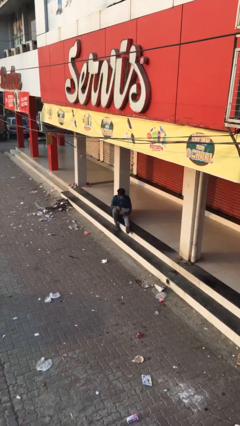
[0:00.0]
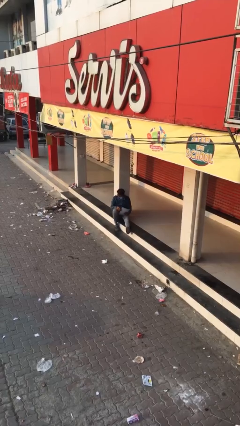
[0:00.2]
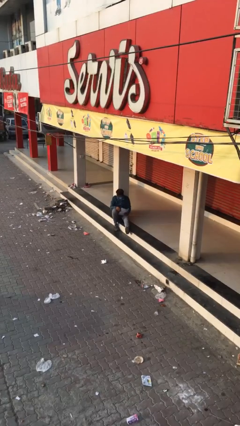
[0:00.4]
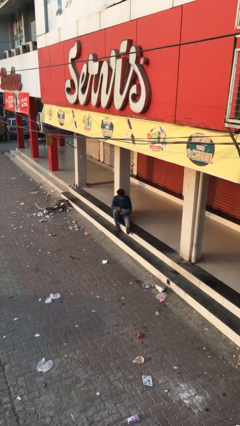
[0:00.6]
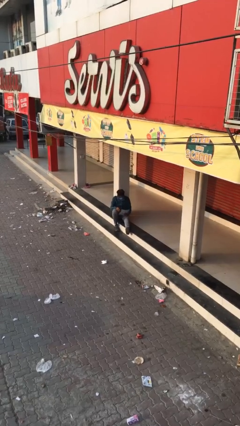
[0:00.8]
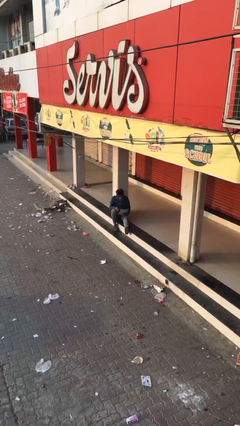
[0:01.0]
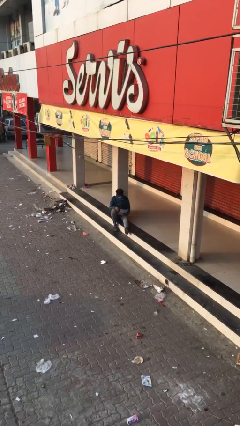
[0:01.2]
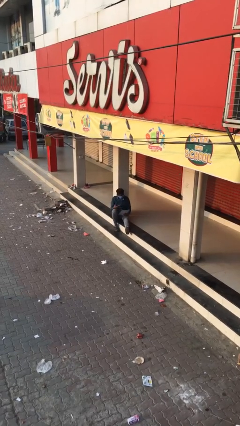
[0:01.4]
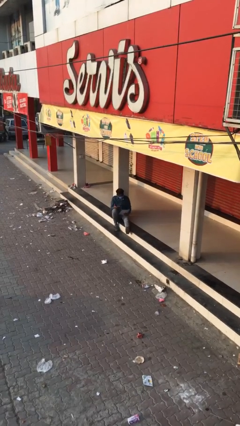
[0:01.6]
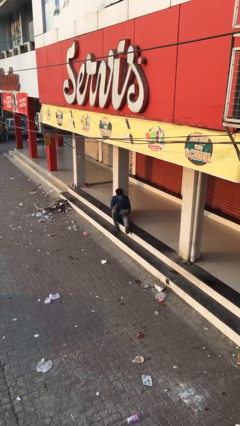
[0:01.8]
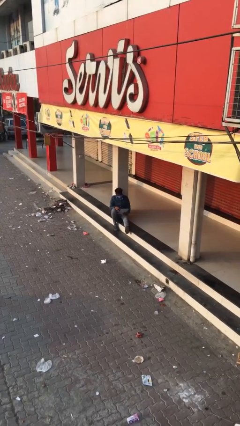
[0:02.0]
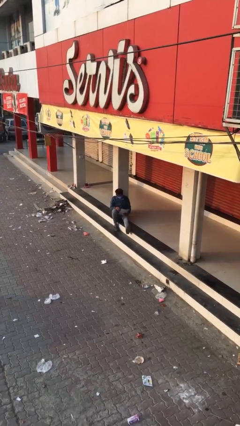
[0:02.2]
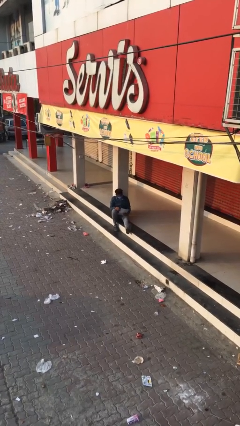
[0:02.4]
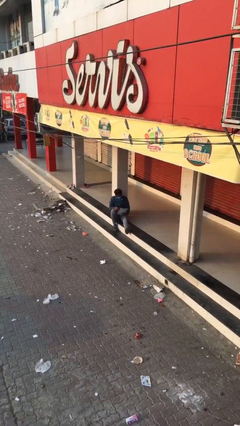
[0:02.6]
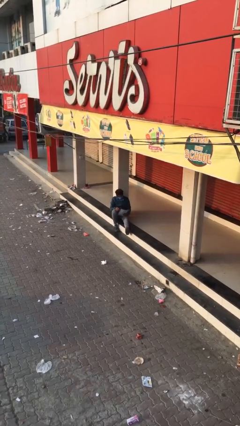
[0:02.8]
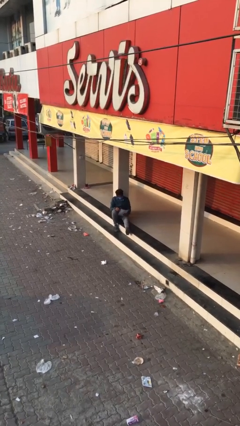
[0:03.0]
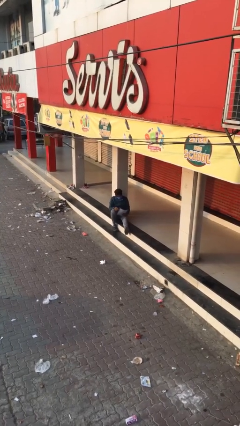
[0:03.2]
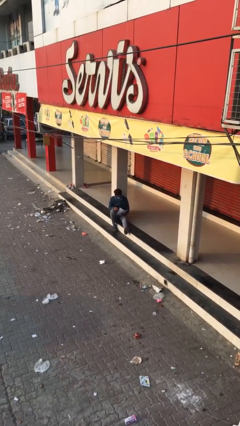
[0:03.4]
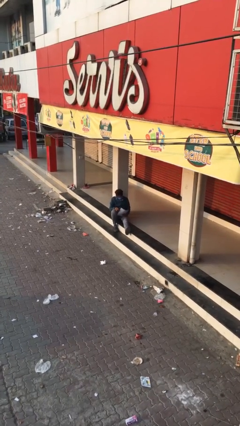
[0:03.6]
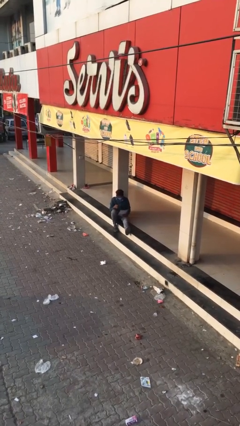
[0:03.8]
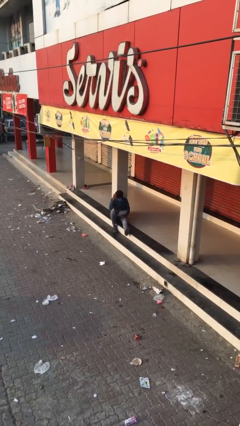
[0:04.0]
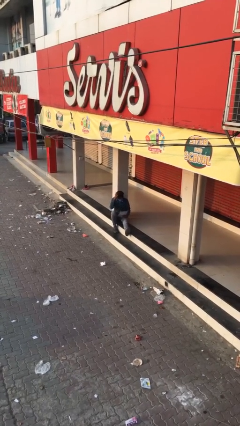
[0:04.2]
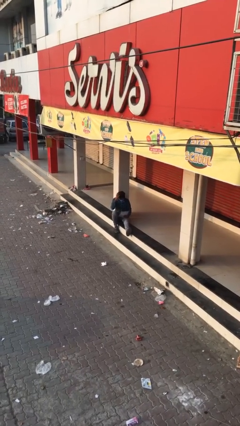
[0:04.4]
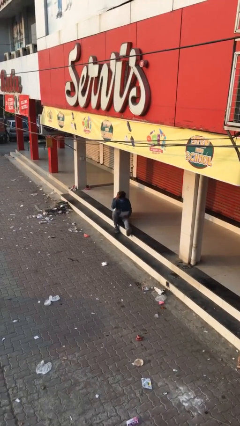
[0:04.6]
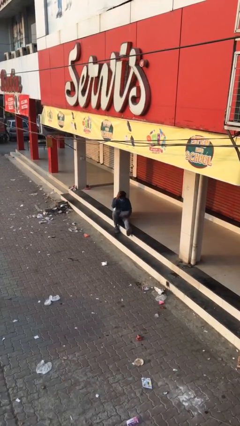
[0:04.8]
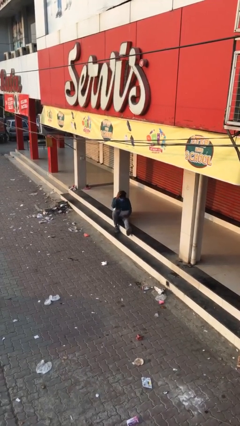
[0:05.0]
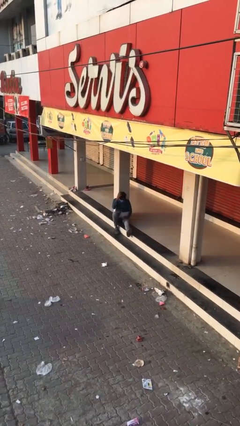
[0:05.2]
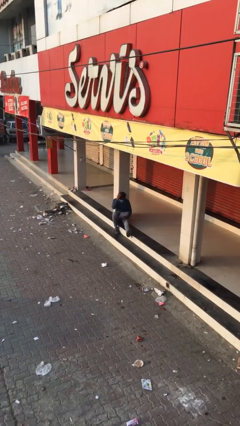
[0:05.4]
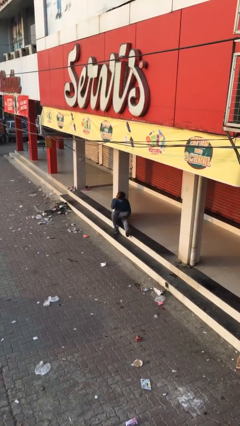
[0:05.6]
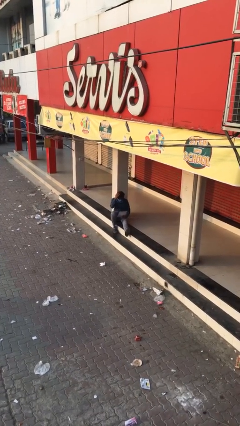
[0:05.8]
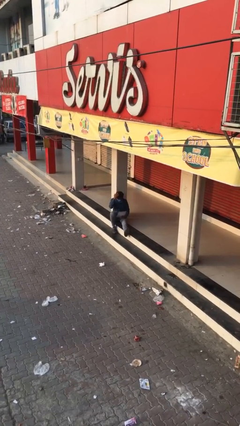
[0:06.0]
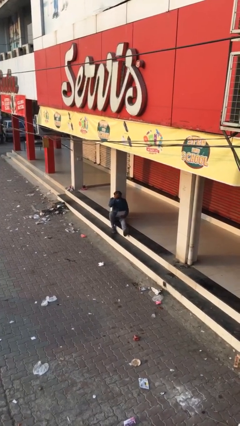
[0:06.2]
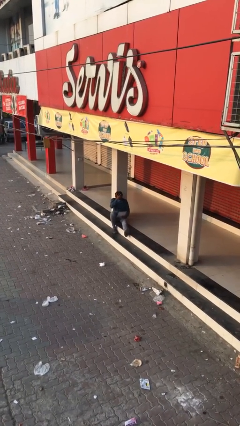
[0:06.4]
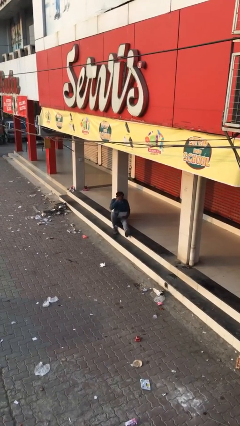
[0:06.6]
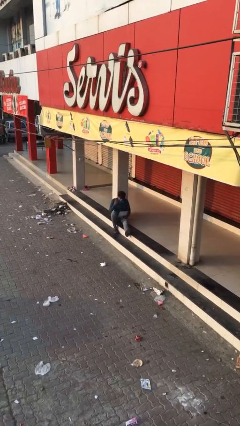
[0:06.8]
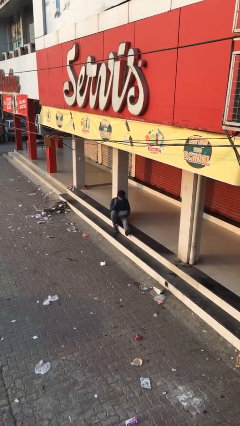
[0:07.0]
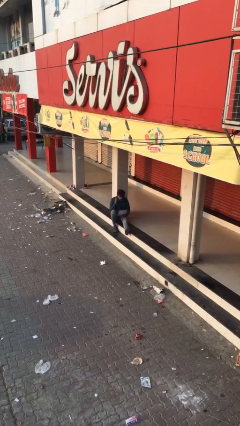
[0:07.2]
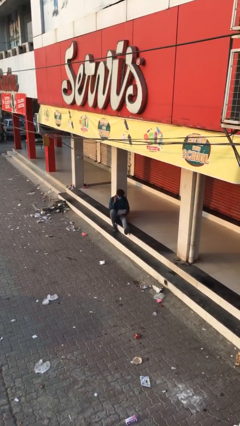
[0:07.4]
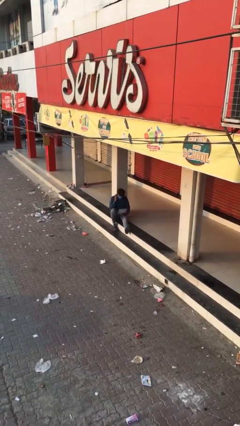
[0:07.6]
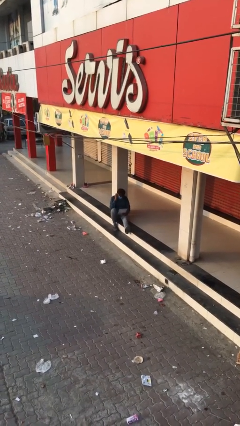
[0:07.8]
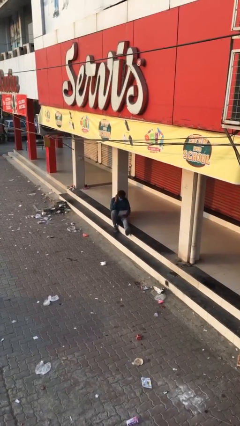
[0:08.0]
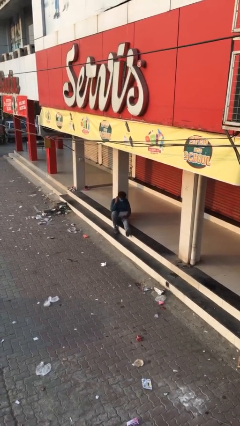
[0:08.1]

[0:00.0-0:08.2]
person reads document

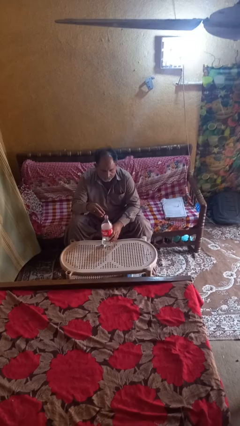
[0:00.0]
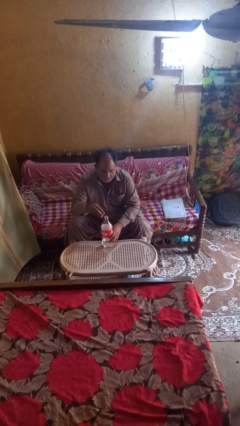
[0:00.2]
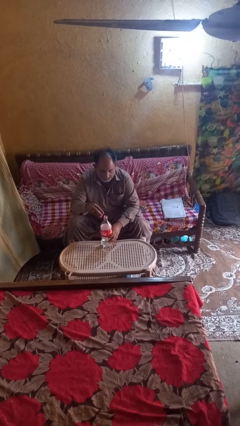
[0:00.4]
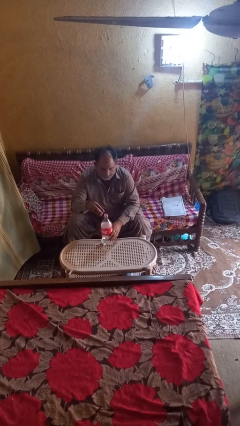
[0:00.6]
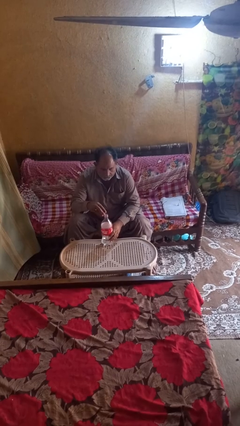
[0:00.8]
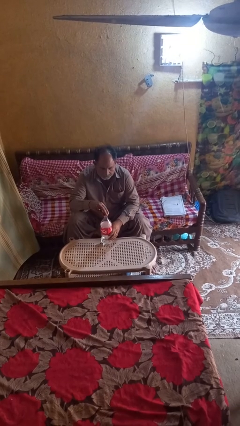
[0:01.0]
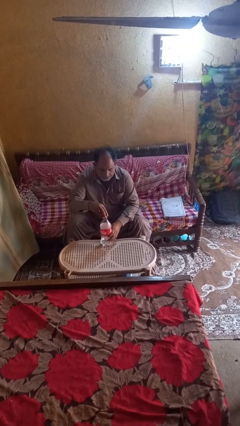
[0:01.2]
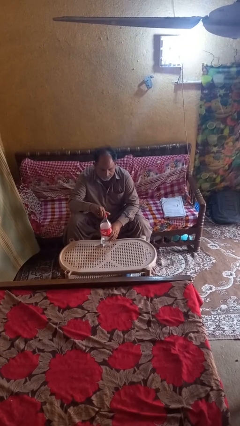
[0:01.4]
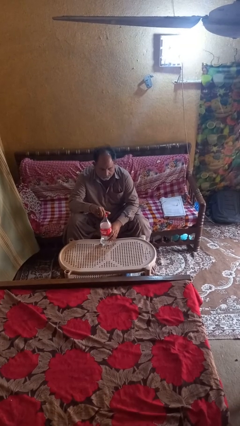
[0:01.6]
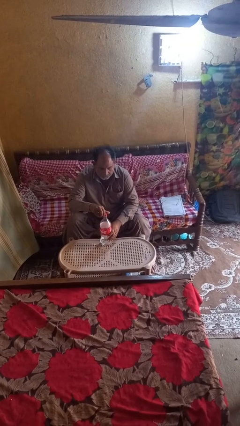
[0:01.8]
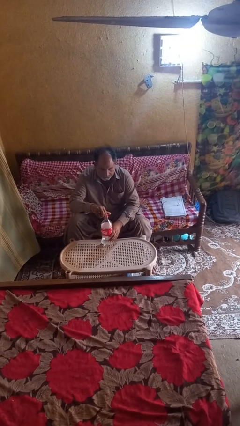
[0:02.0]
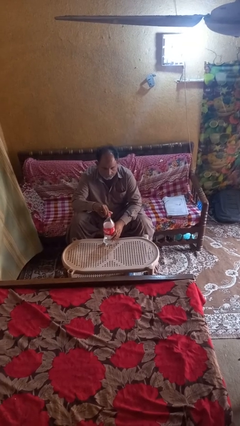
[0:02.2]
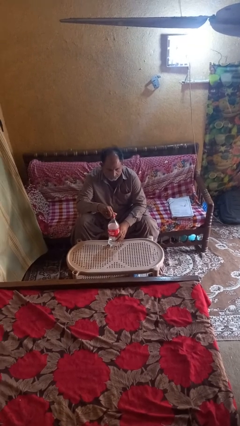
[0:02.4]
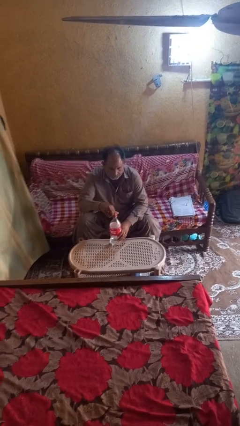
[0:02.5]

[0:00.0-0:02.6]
person screws lid to bottle

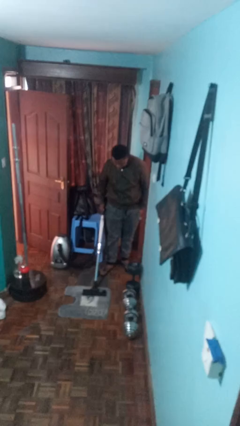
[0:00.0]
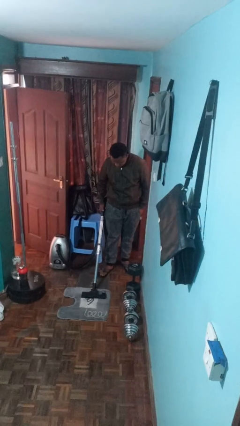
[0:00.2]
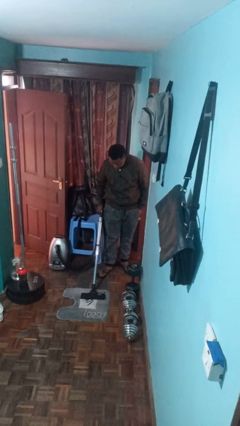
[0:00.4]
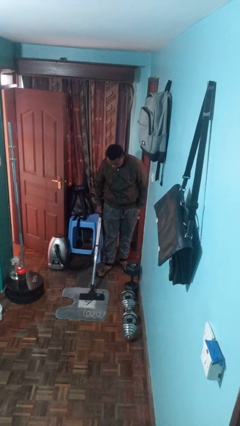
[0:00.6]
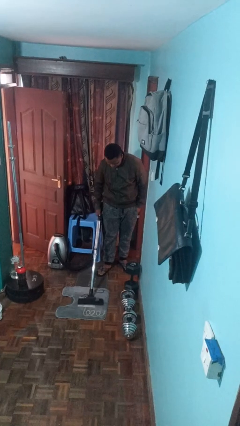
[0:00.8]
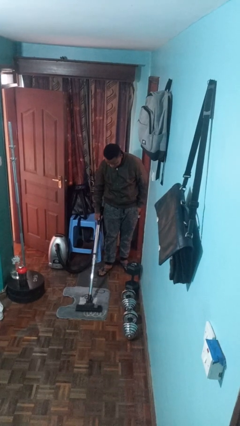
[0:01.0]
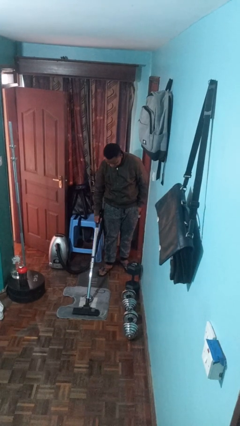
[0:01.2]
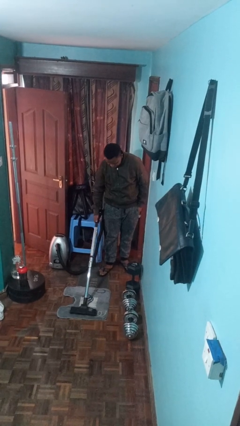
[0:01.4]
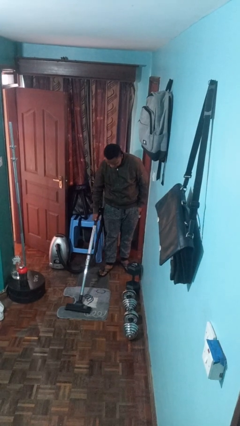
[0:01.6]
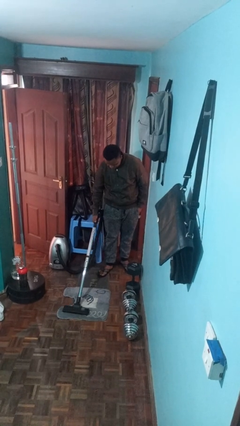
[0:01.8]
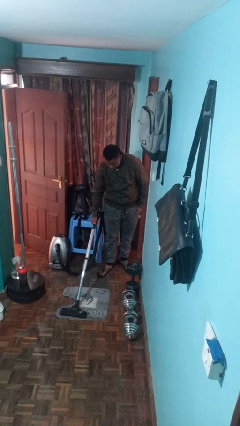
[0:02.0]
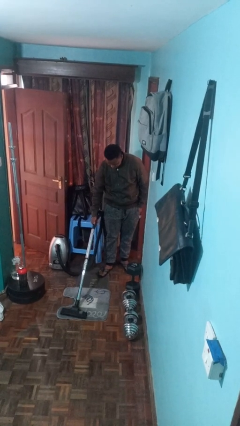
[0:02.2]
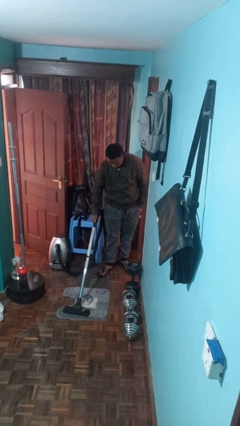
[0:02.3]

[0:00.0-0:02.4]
person vacuums carpet

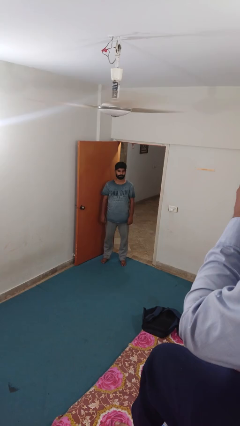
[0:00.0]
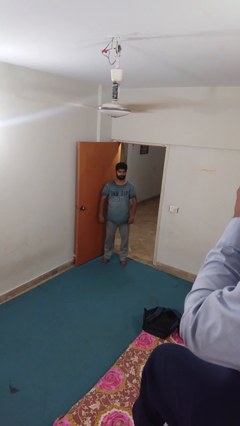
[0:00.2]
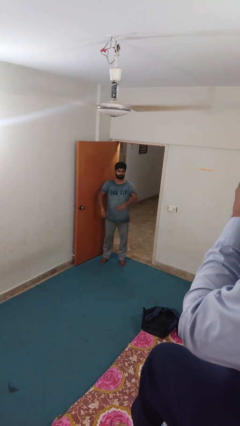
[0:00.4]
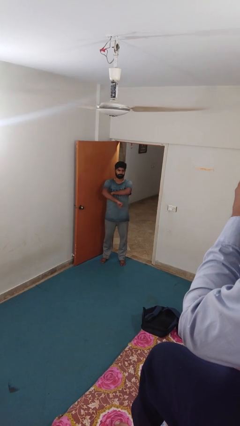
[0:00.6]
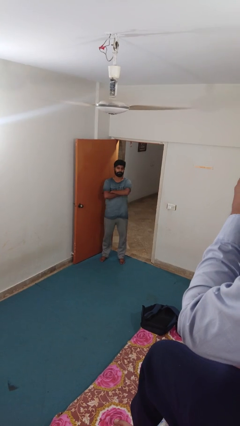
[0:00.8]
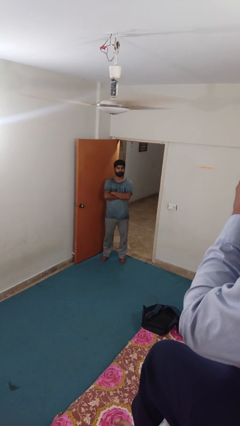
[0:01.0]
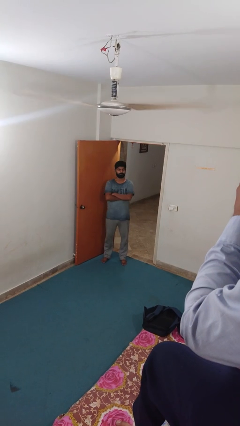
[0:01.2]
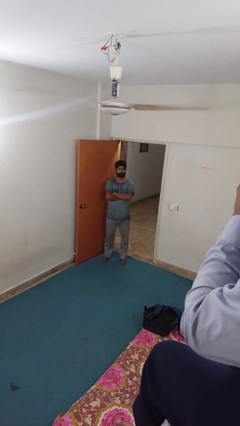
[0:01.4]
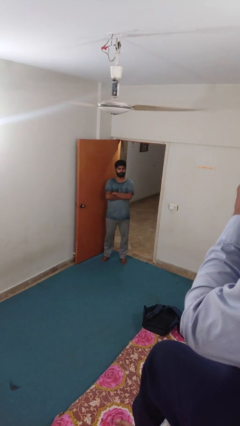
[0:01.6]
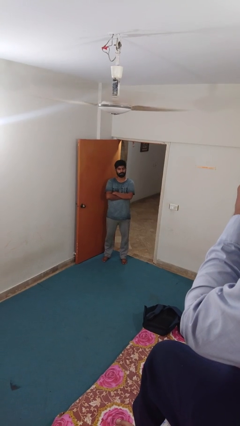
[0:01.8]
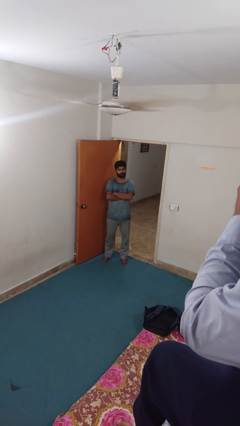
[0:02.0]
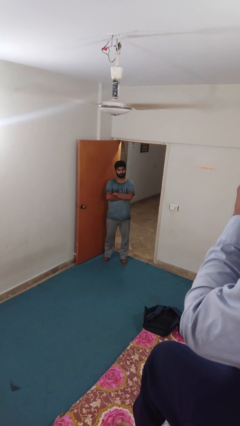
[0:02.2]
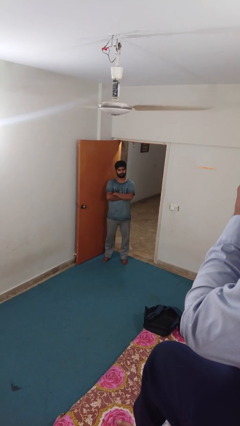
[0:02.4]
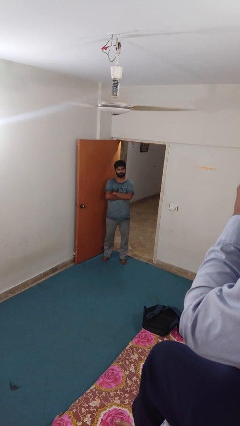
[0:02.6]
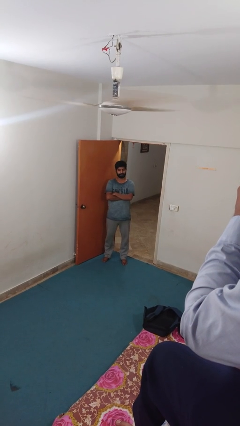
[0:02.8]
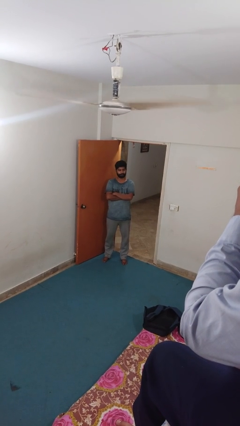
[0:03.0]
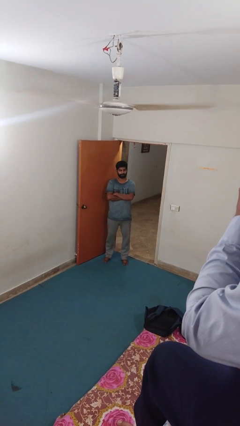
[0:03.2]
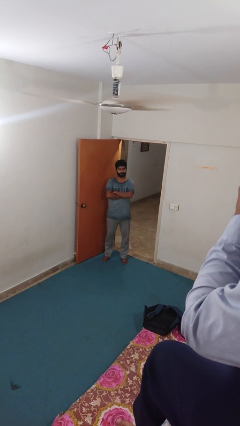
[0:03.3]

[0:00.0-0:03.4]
person crosses arms

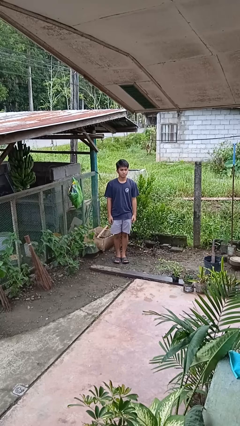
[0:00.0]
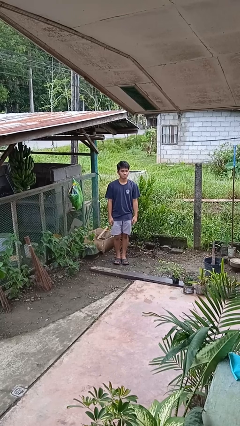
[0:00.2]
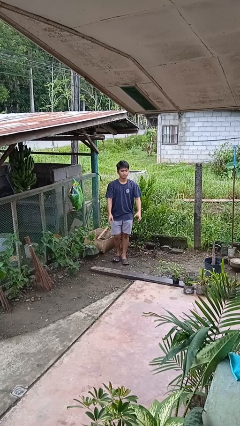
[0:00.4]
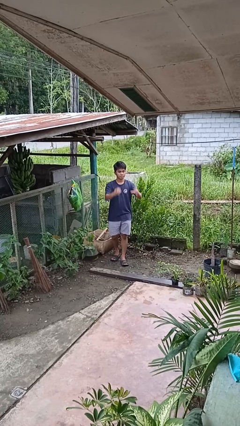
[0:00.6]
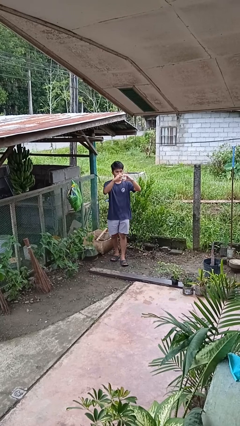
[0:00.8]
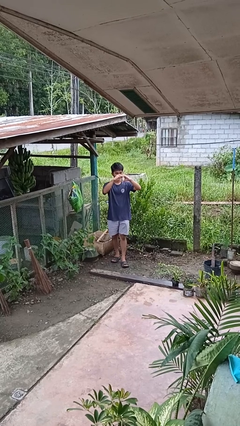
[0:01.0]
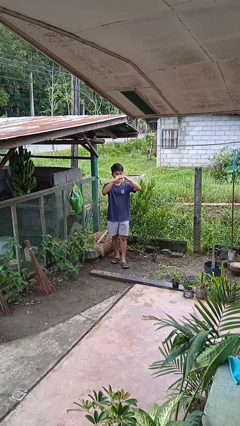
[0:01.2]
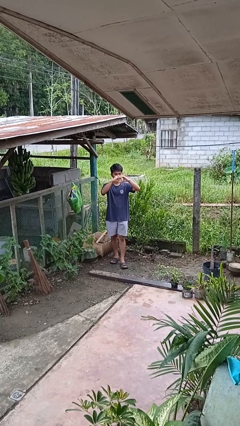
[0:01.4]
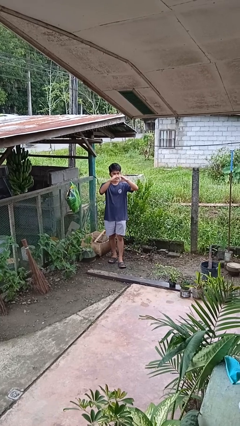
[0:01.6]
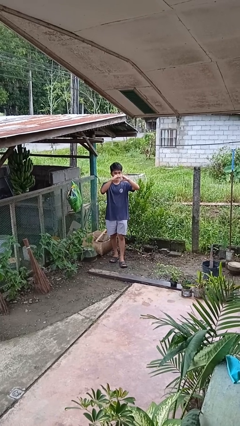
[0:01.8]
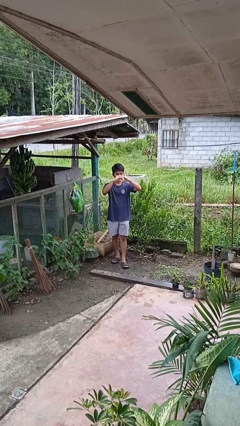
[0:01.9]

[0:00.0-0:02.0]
person gestures heart
